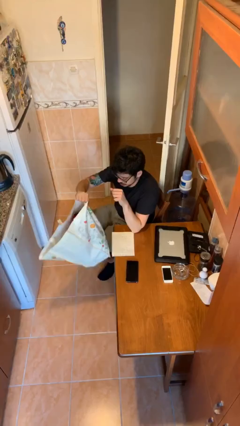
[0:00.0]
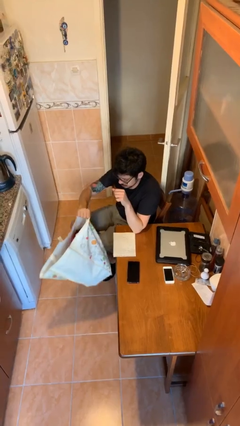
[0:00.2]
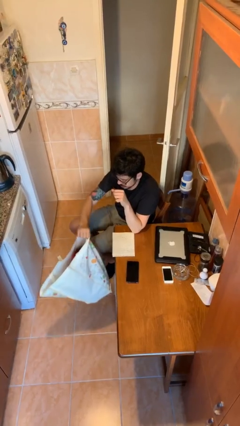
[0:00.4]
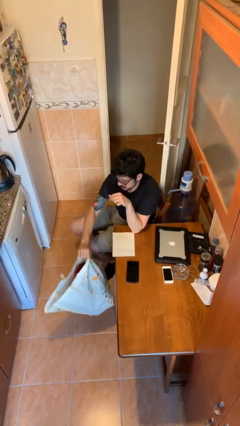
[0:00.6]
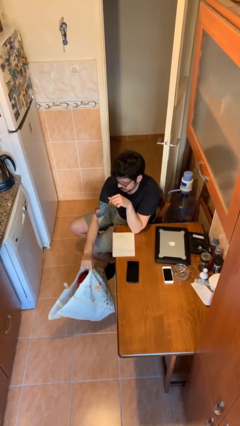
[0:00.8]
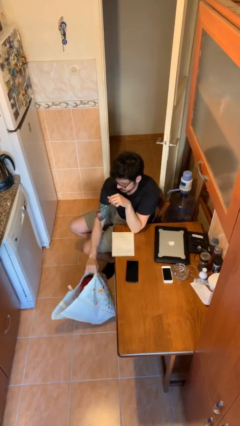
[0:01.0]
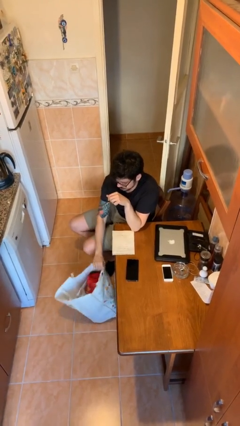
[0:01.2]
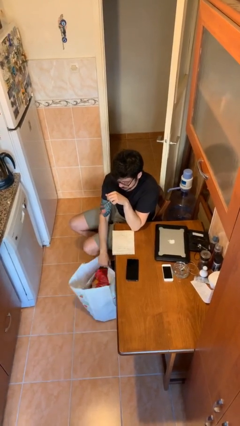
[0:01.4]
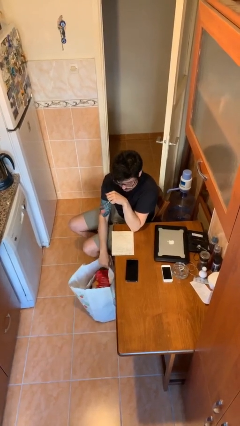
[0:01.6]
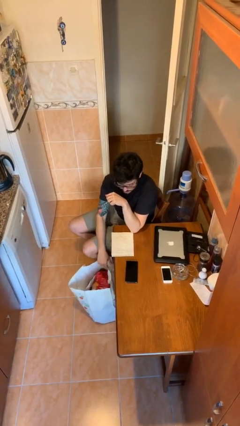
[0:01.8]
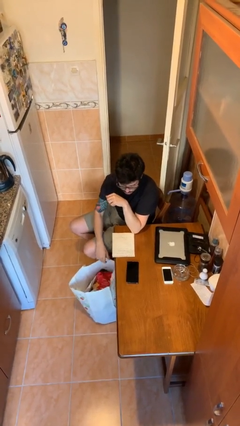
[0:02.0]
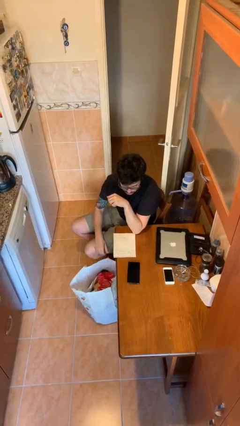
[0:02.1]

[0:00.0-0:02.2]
person puts down object on floor

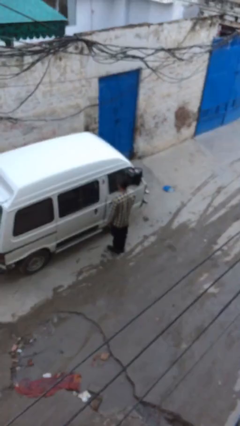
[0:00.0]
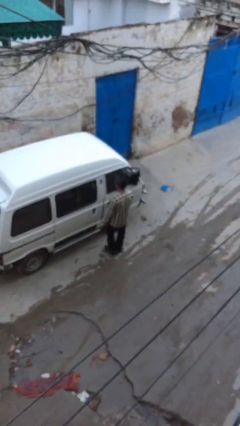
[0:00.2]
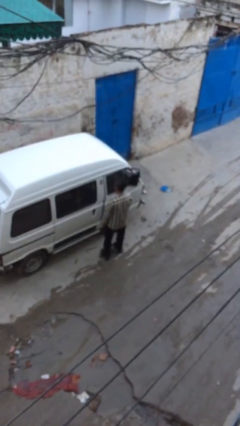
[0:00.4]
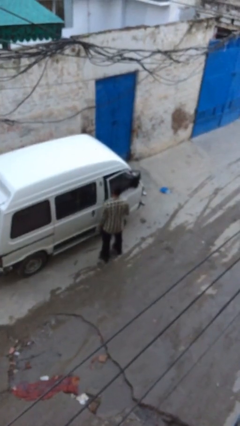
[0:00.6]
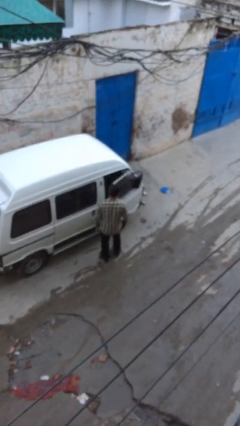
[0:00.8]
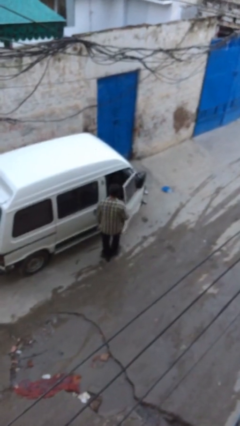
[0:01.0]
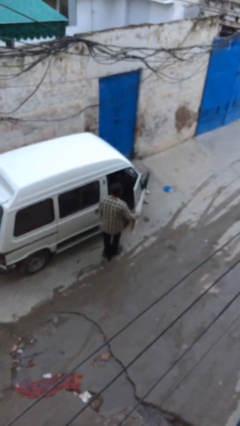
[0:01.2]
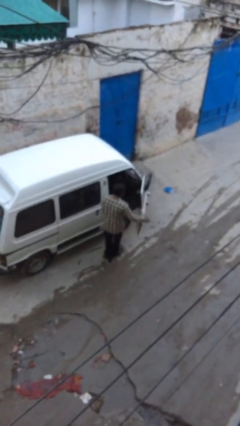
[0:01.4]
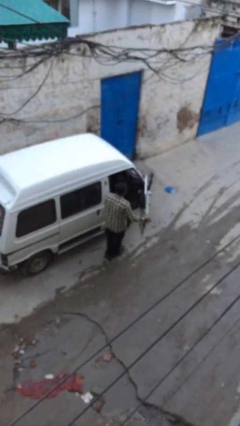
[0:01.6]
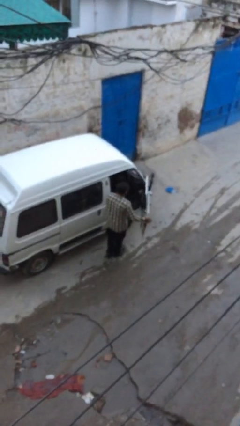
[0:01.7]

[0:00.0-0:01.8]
person opens car door

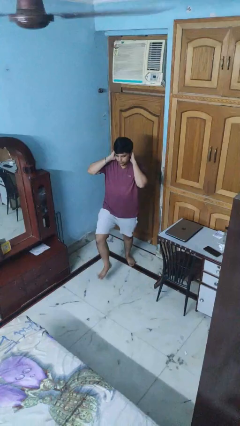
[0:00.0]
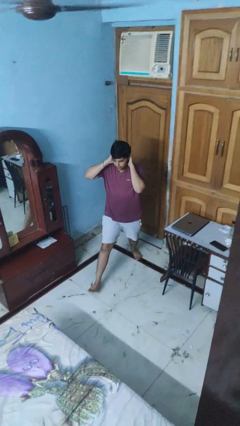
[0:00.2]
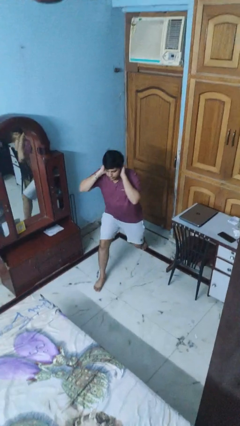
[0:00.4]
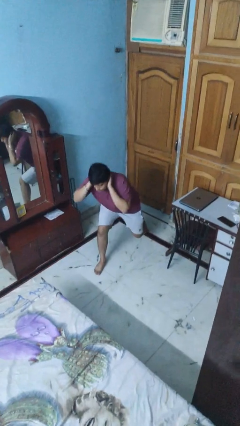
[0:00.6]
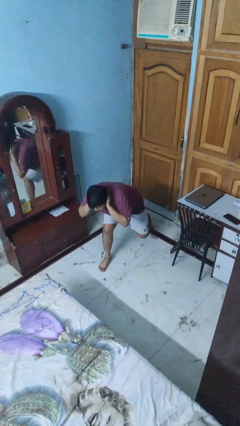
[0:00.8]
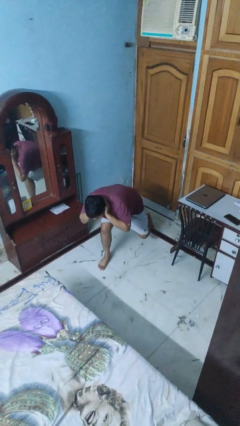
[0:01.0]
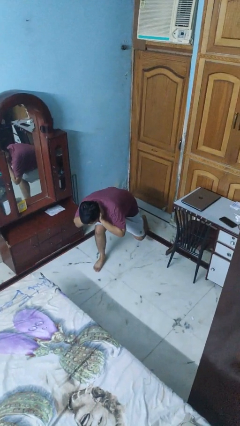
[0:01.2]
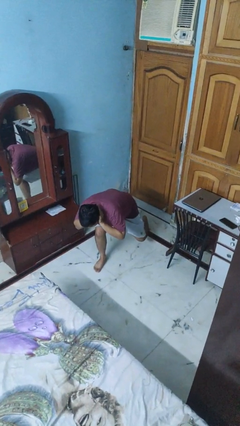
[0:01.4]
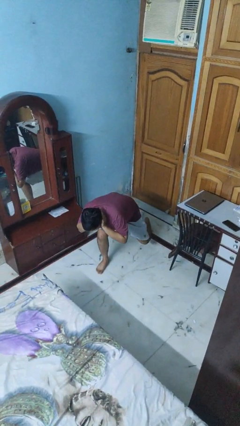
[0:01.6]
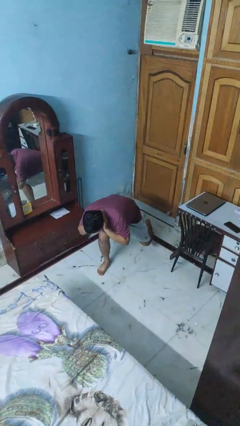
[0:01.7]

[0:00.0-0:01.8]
person exercises with lunges

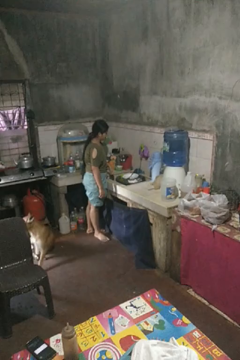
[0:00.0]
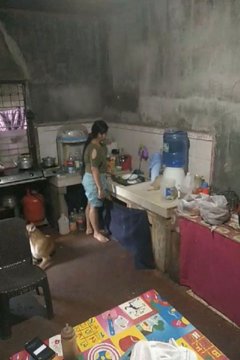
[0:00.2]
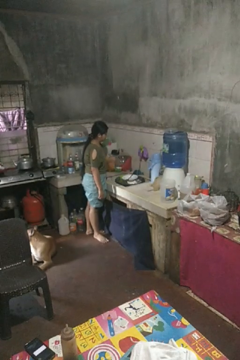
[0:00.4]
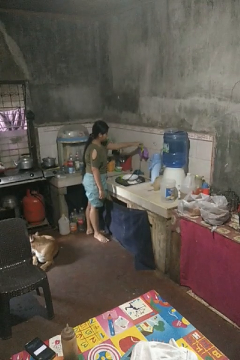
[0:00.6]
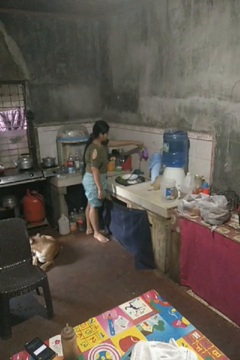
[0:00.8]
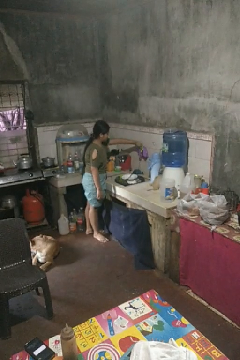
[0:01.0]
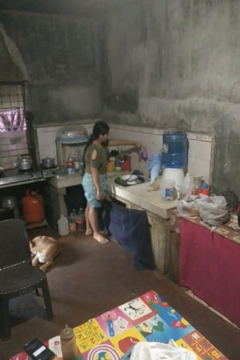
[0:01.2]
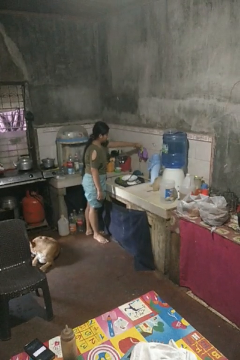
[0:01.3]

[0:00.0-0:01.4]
person turns off faucet

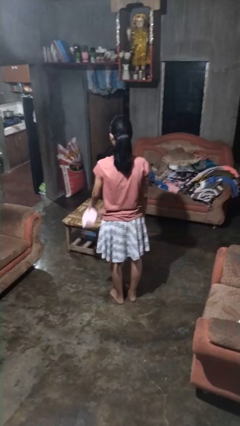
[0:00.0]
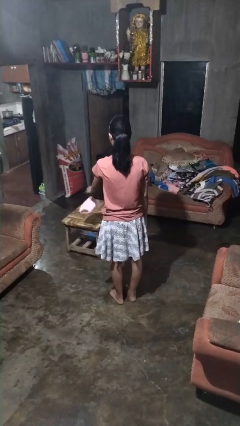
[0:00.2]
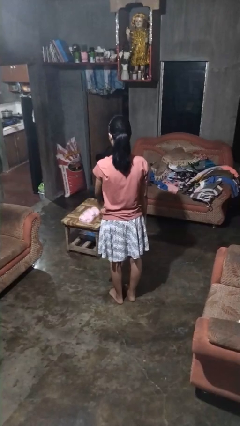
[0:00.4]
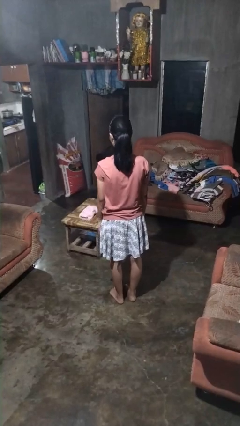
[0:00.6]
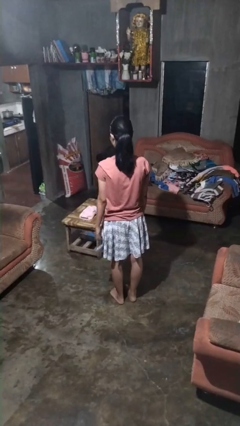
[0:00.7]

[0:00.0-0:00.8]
person throws object on table

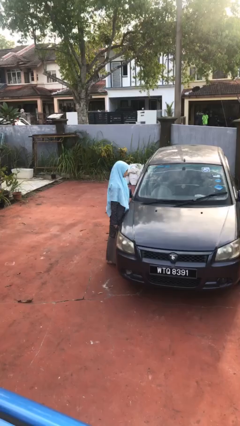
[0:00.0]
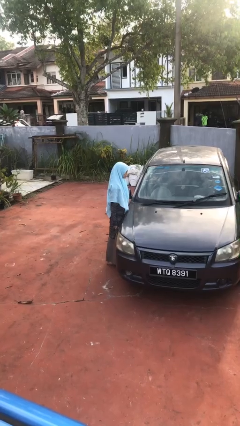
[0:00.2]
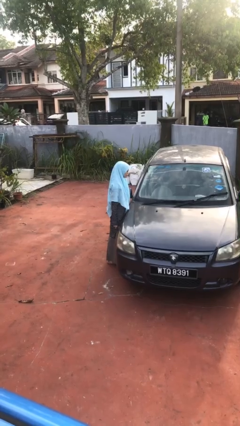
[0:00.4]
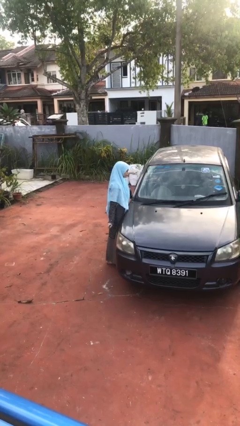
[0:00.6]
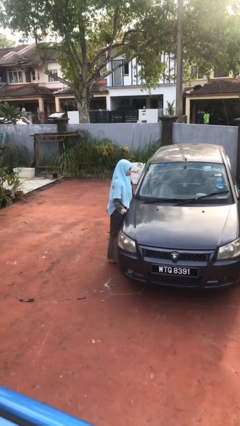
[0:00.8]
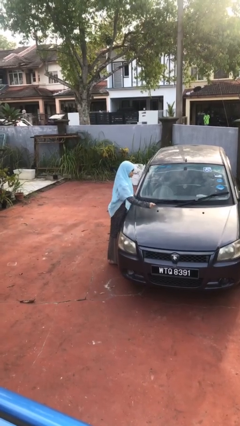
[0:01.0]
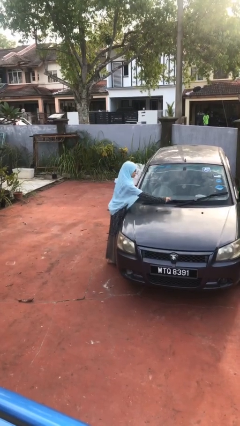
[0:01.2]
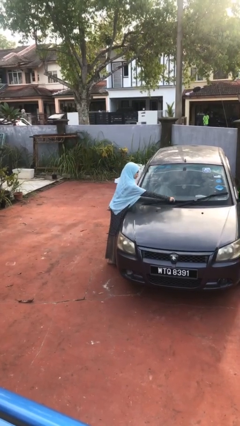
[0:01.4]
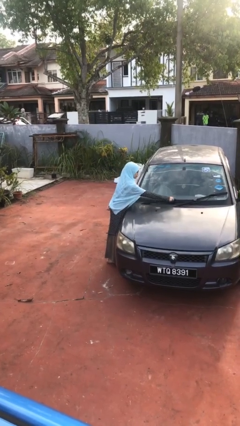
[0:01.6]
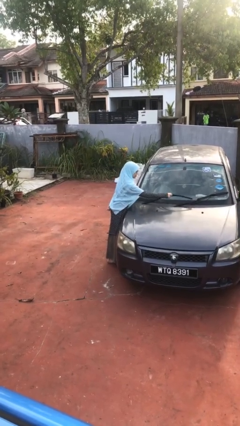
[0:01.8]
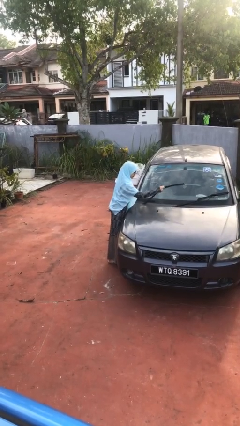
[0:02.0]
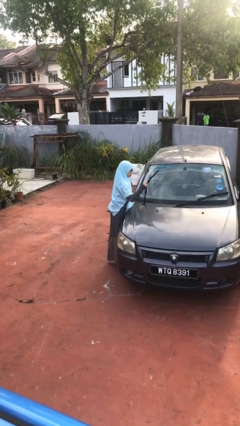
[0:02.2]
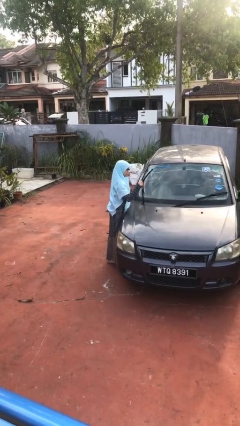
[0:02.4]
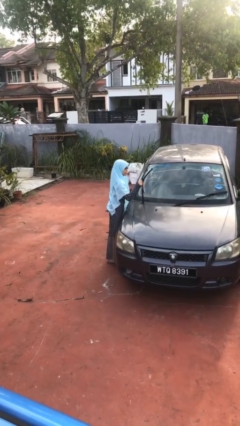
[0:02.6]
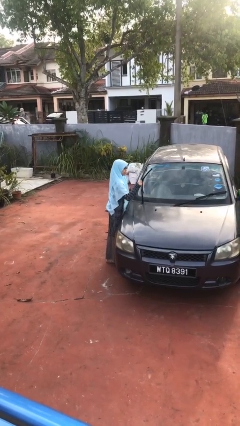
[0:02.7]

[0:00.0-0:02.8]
person flips up car wipers

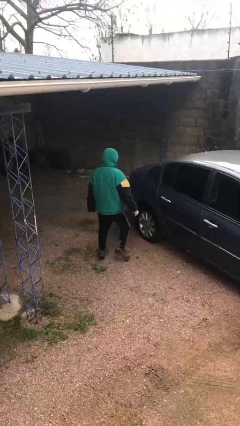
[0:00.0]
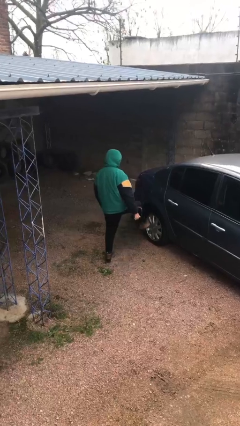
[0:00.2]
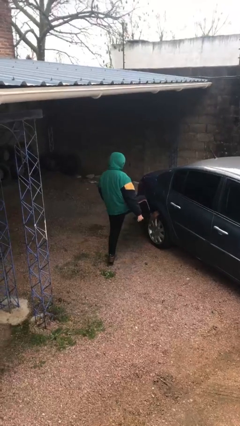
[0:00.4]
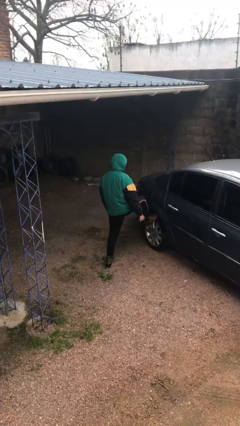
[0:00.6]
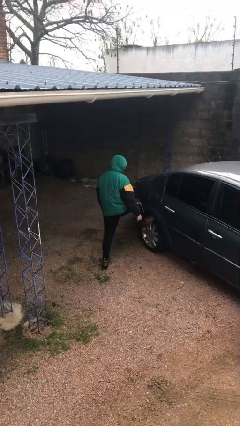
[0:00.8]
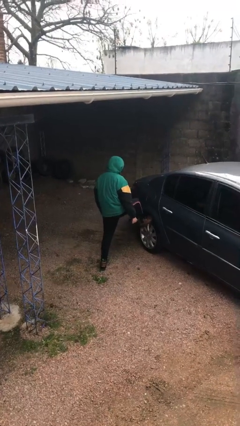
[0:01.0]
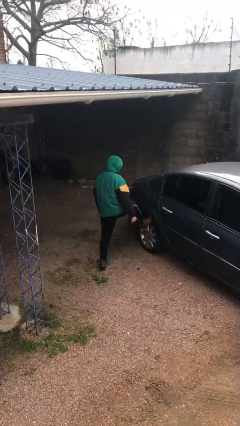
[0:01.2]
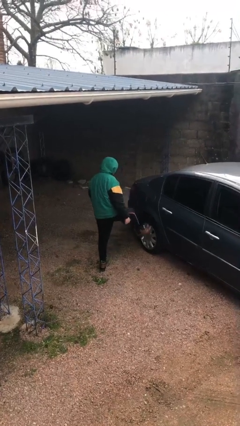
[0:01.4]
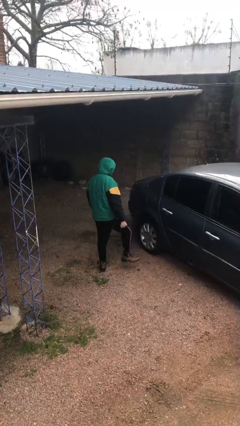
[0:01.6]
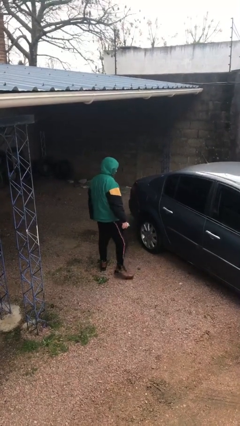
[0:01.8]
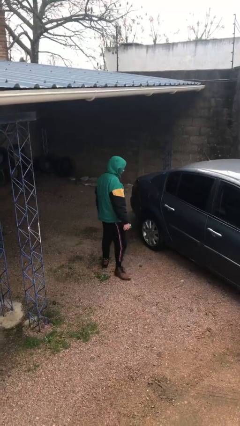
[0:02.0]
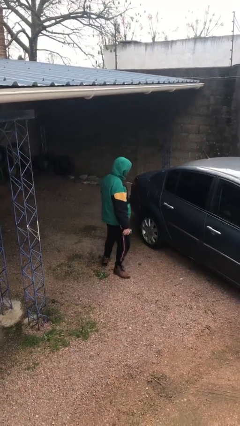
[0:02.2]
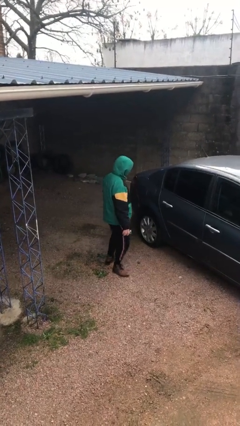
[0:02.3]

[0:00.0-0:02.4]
person kicks car tires

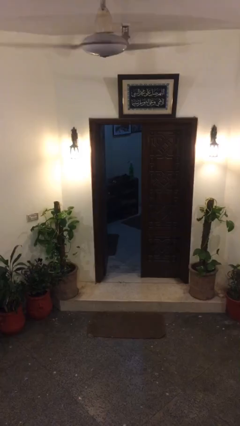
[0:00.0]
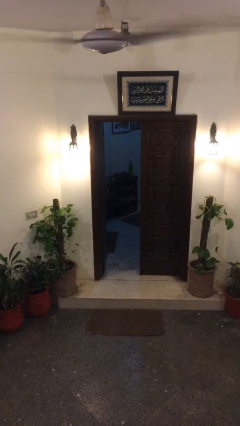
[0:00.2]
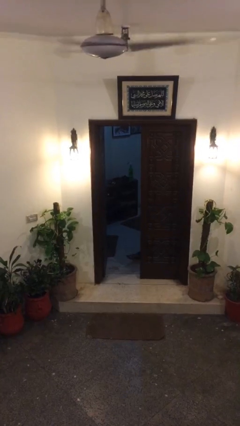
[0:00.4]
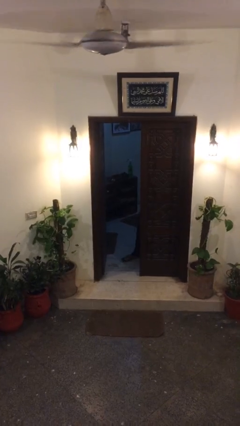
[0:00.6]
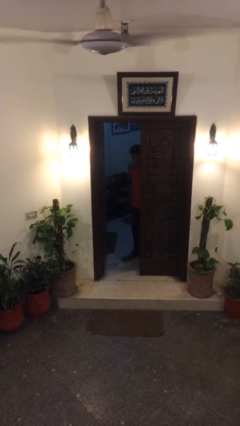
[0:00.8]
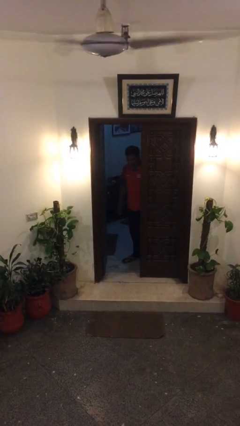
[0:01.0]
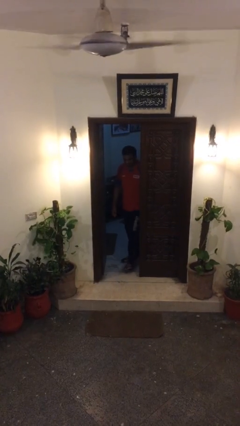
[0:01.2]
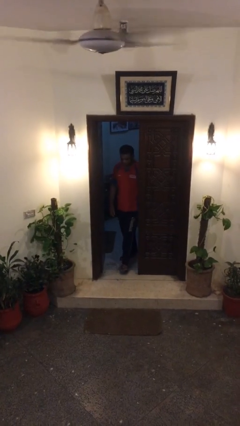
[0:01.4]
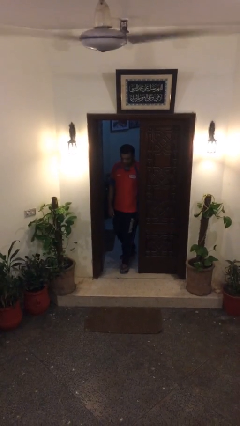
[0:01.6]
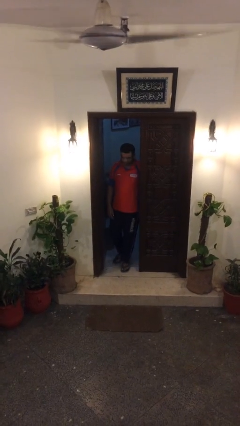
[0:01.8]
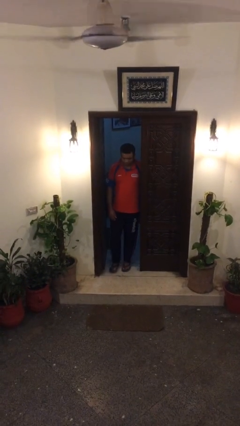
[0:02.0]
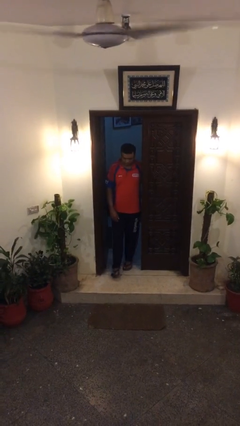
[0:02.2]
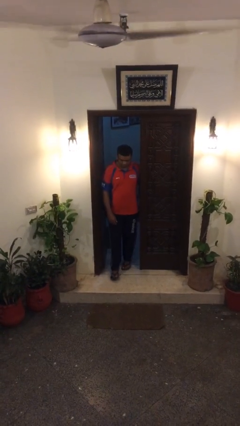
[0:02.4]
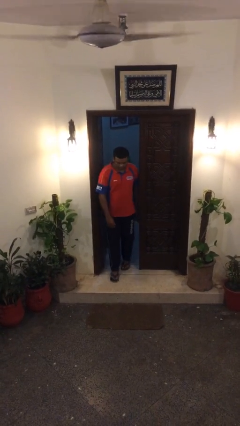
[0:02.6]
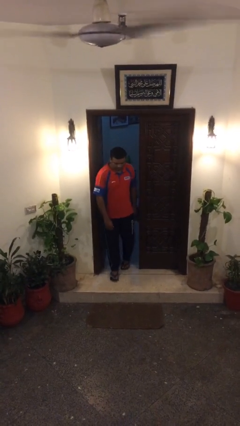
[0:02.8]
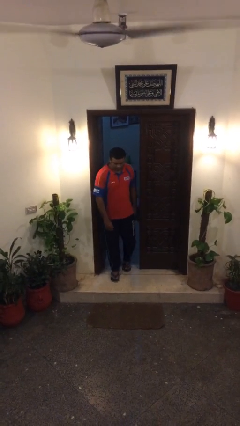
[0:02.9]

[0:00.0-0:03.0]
person enters scene through structure

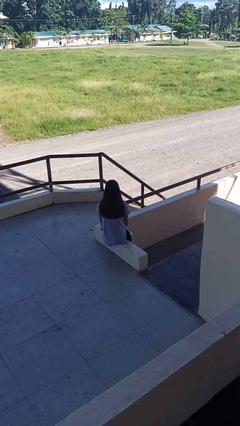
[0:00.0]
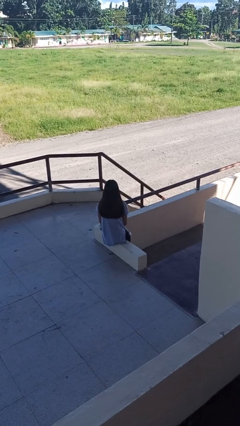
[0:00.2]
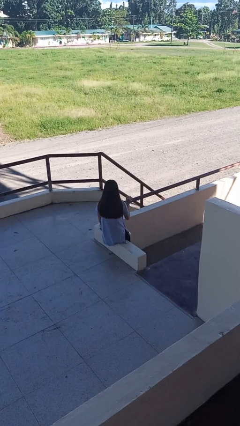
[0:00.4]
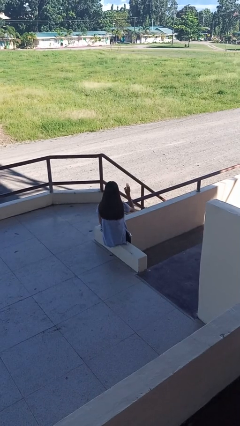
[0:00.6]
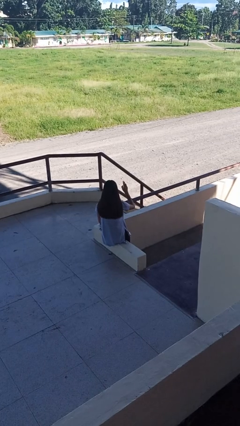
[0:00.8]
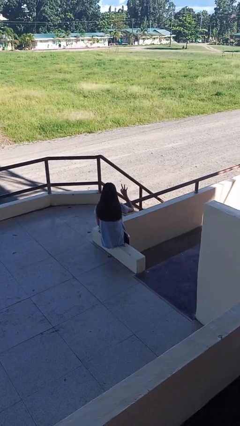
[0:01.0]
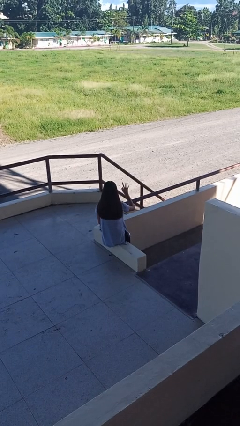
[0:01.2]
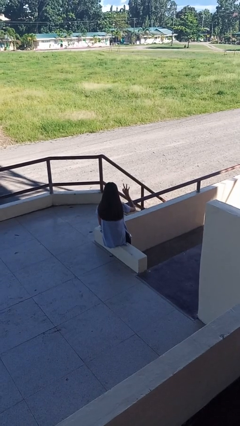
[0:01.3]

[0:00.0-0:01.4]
person gestures number three
